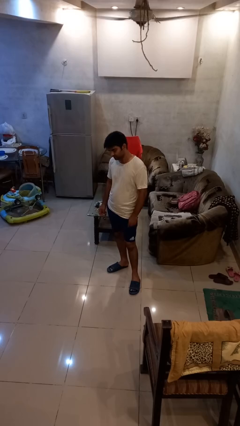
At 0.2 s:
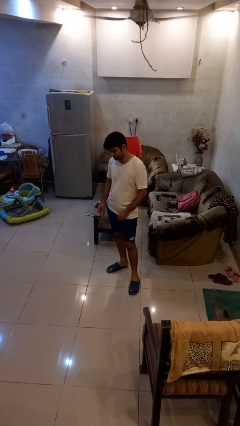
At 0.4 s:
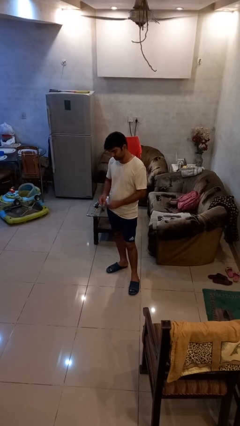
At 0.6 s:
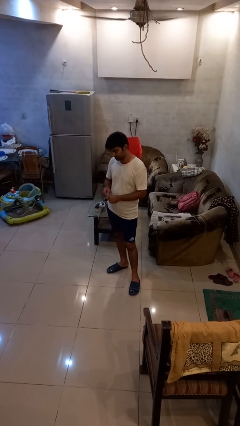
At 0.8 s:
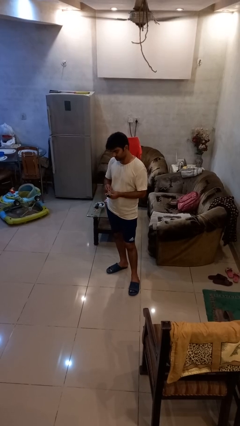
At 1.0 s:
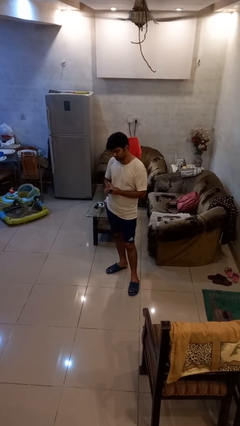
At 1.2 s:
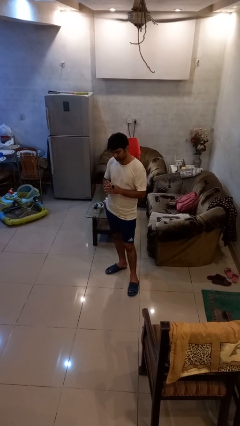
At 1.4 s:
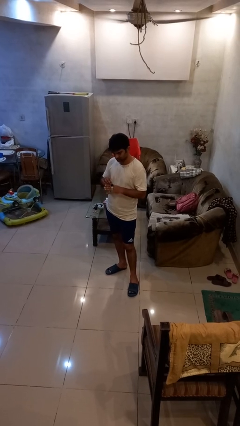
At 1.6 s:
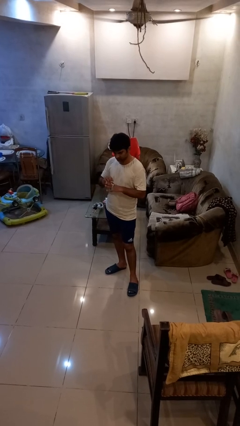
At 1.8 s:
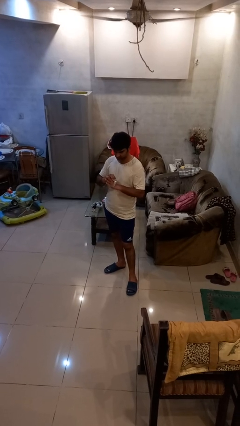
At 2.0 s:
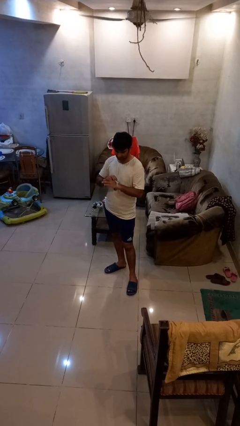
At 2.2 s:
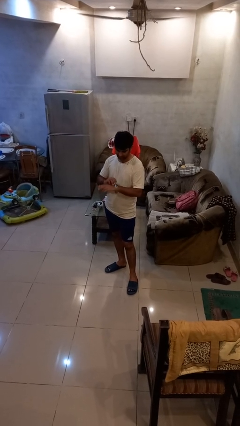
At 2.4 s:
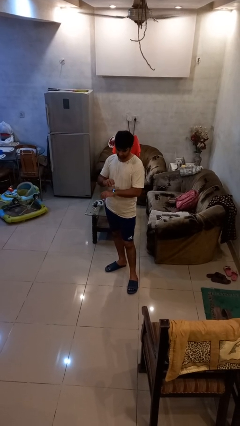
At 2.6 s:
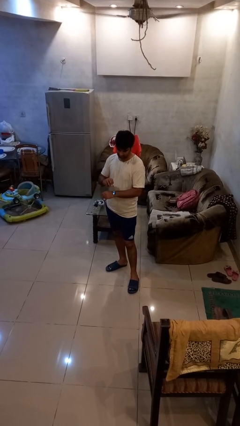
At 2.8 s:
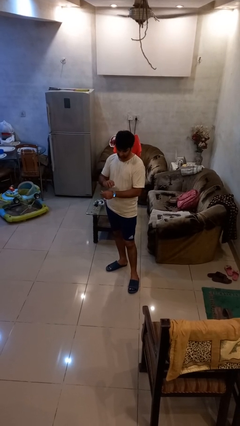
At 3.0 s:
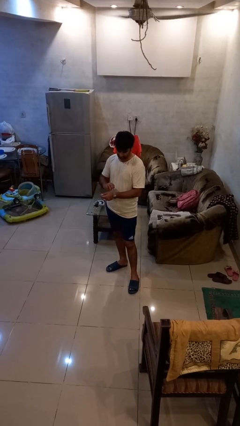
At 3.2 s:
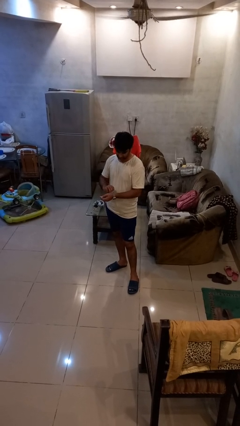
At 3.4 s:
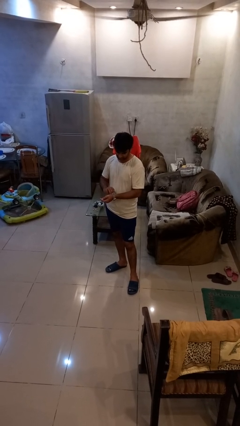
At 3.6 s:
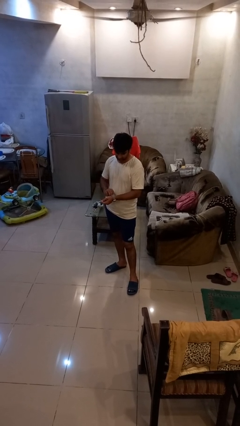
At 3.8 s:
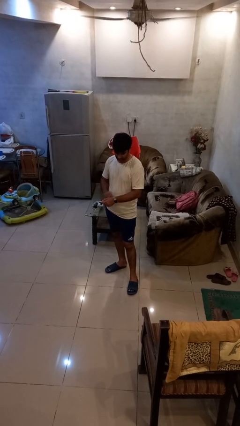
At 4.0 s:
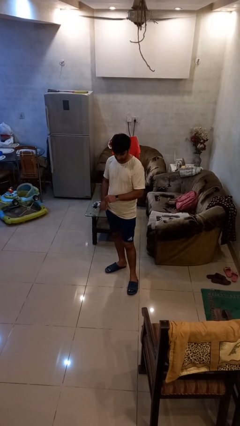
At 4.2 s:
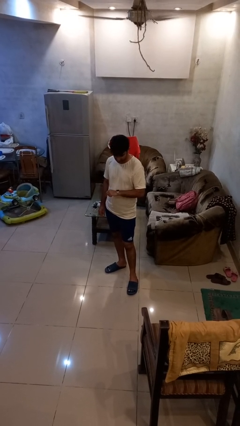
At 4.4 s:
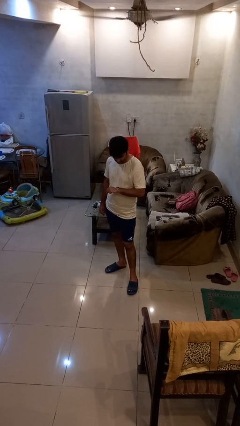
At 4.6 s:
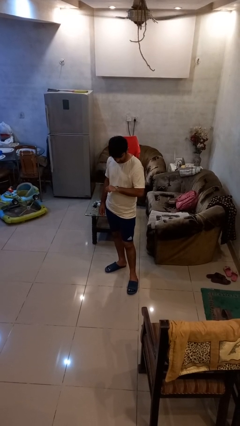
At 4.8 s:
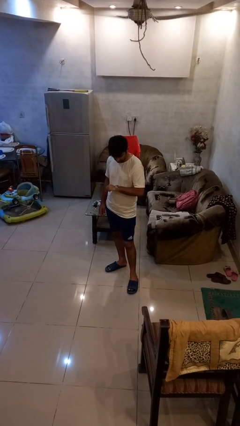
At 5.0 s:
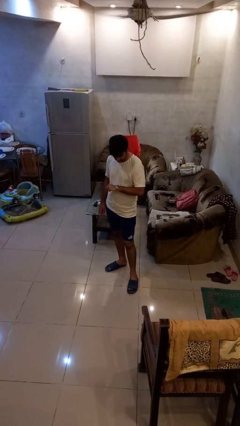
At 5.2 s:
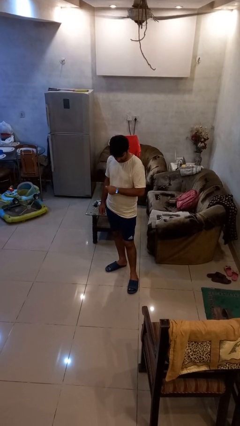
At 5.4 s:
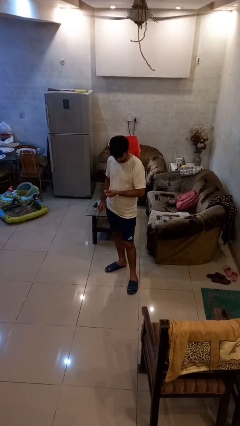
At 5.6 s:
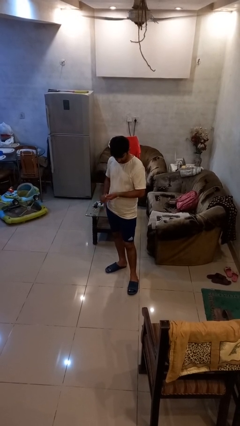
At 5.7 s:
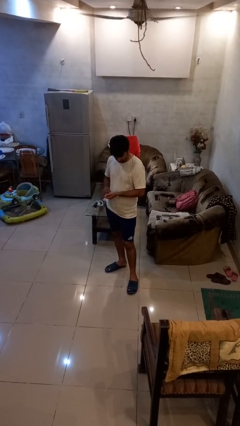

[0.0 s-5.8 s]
person puts on wristwatch

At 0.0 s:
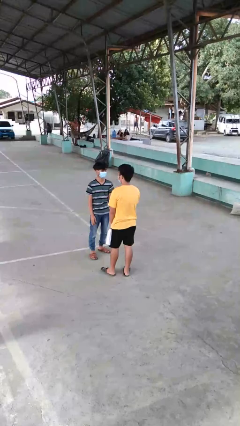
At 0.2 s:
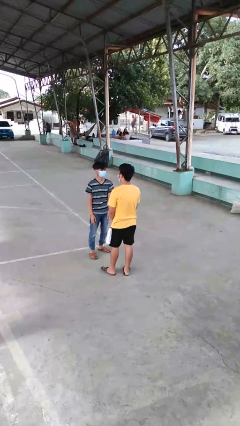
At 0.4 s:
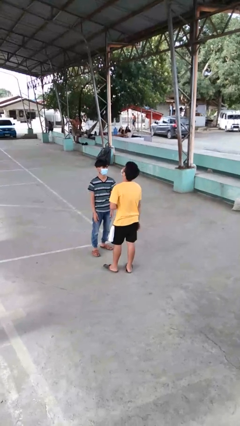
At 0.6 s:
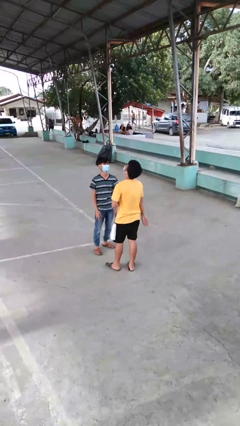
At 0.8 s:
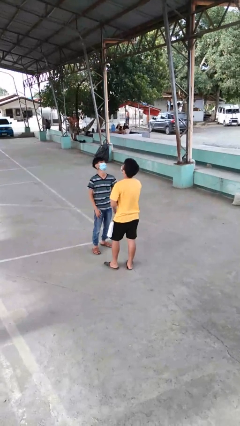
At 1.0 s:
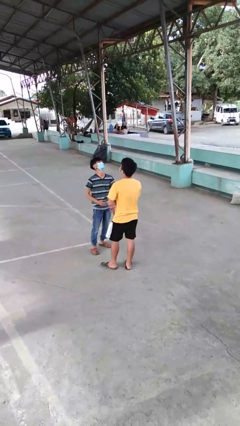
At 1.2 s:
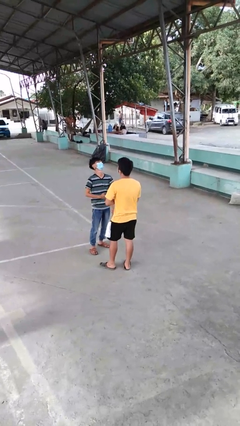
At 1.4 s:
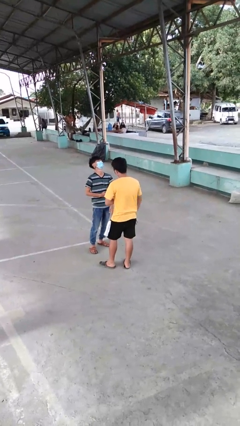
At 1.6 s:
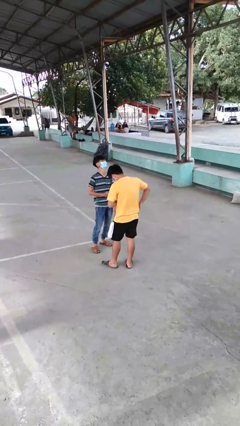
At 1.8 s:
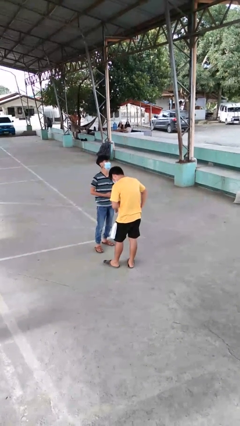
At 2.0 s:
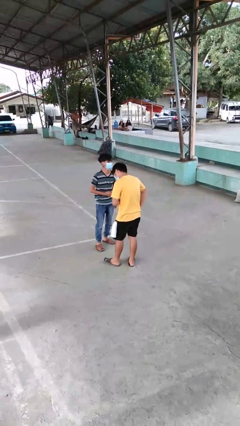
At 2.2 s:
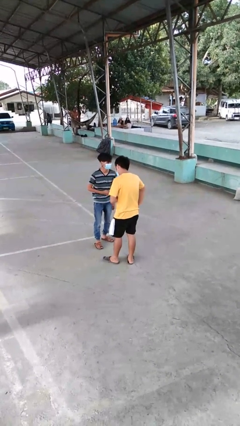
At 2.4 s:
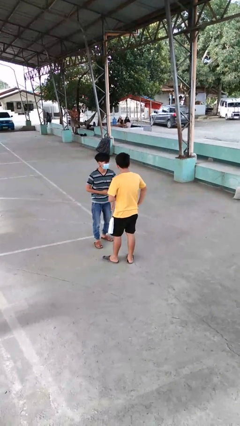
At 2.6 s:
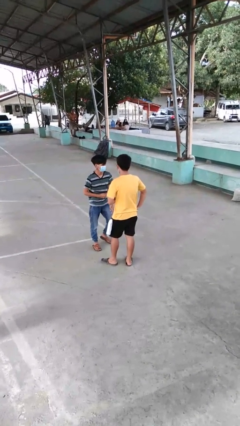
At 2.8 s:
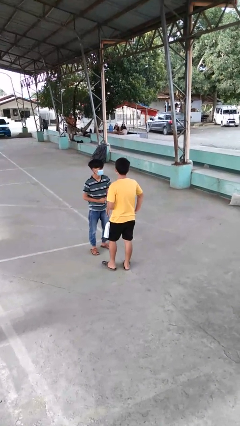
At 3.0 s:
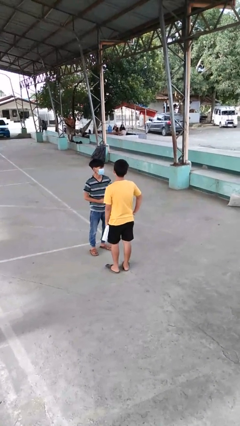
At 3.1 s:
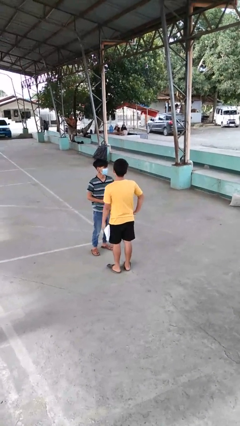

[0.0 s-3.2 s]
person laughs with person

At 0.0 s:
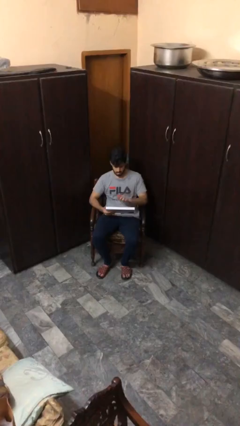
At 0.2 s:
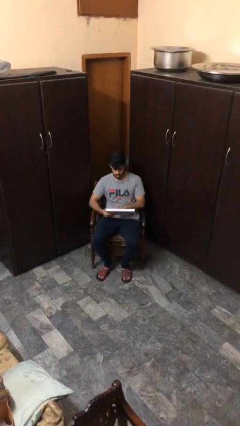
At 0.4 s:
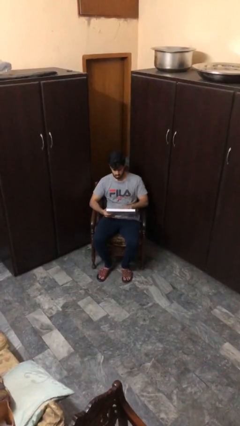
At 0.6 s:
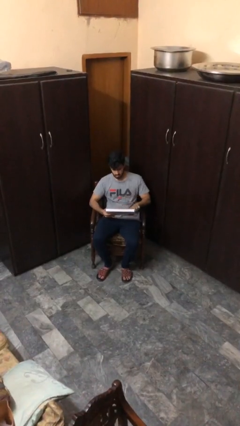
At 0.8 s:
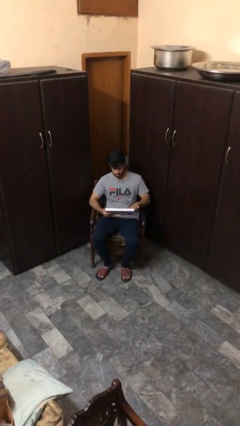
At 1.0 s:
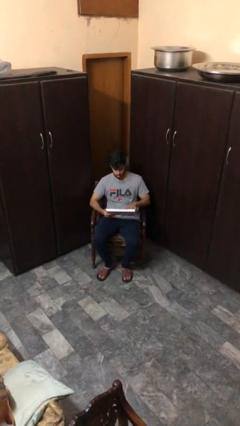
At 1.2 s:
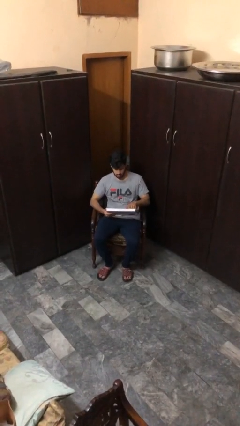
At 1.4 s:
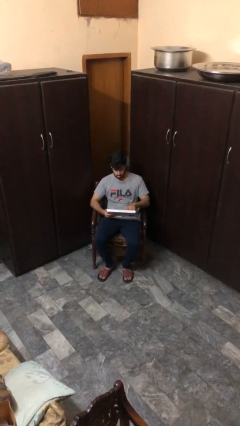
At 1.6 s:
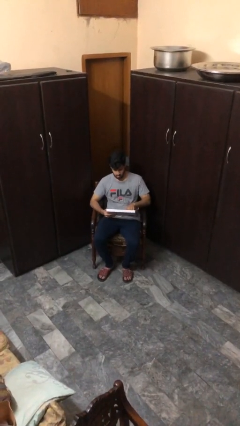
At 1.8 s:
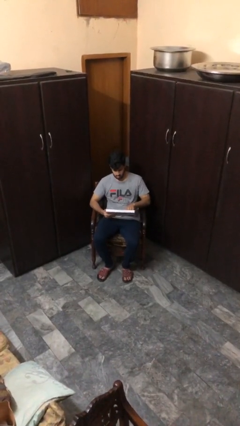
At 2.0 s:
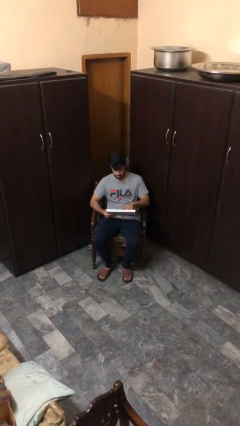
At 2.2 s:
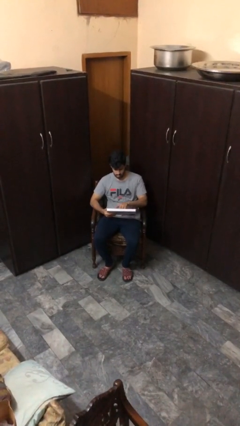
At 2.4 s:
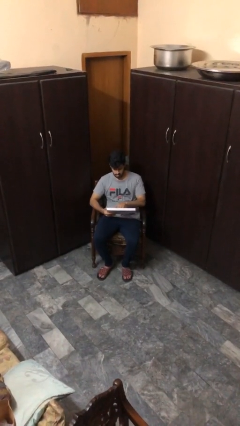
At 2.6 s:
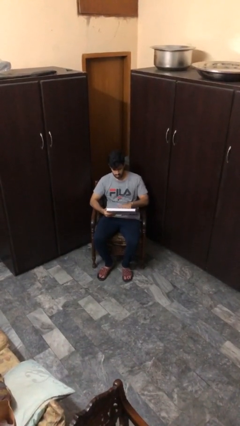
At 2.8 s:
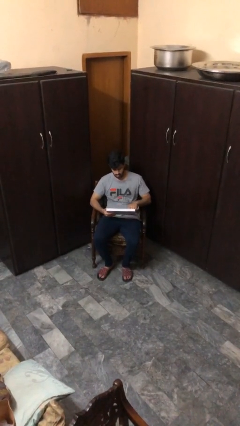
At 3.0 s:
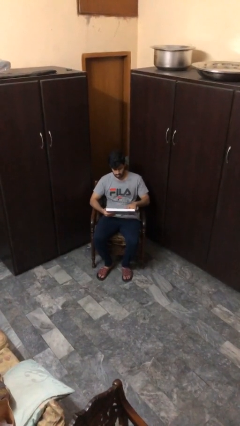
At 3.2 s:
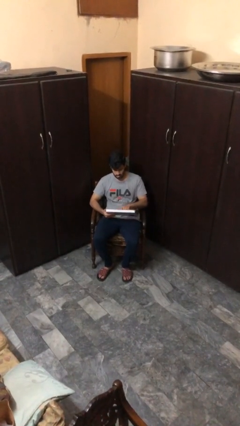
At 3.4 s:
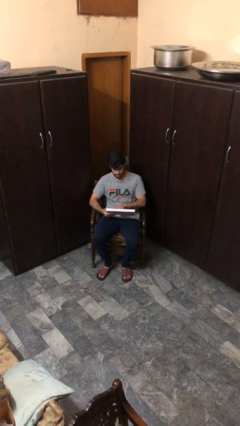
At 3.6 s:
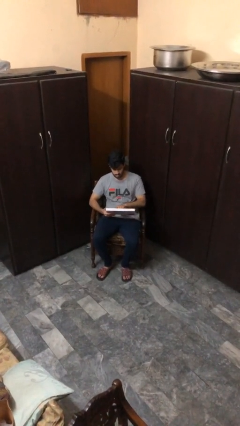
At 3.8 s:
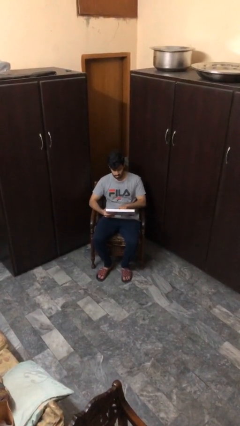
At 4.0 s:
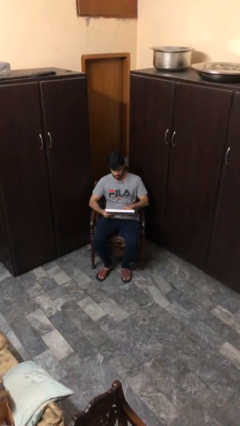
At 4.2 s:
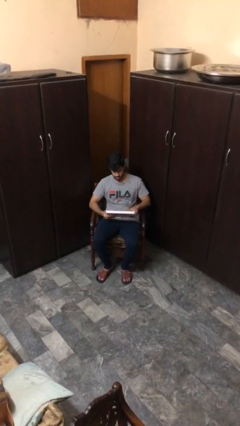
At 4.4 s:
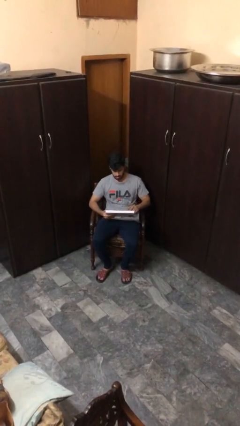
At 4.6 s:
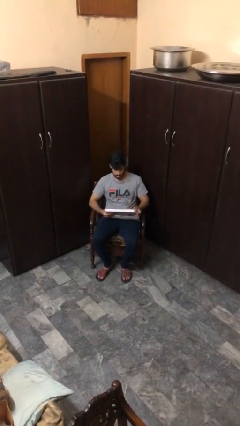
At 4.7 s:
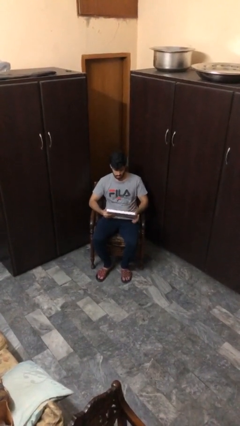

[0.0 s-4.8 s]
person interacts with tablet

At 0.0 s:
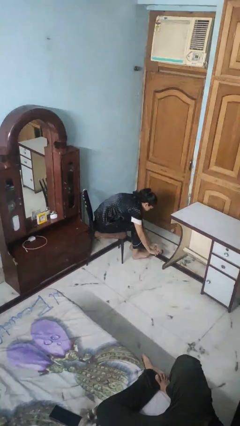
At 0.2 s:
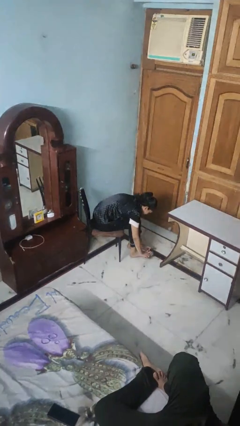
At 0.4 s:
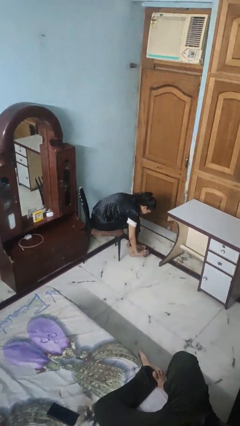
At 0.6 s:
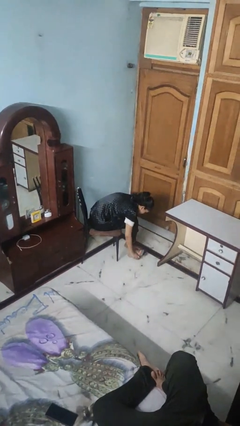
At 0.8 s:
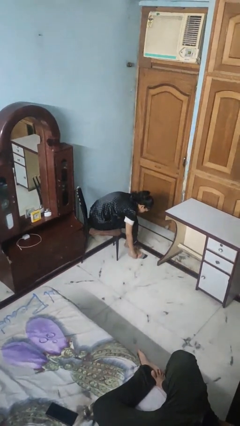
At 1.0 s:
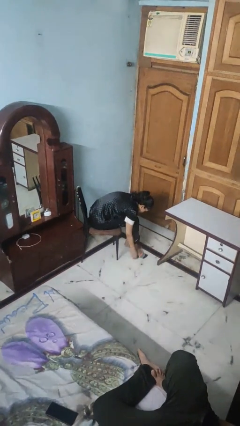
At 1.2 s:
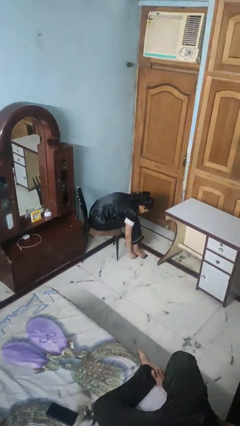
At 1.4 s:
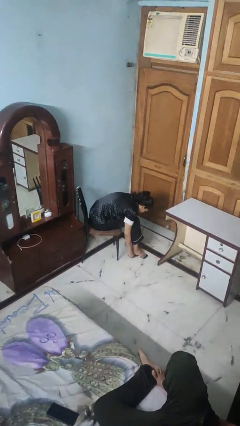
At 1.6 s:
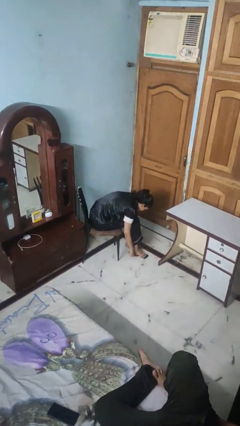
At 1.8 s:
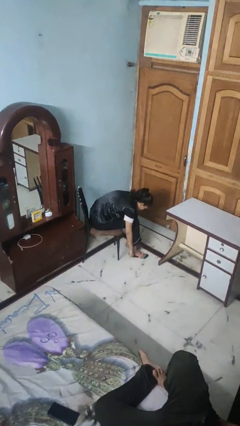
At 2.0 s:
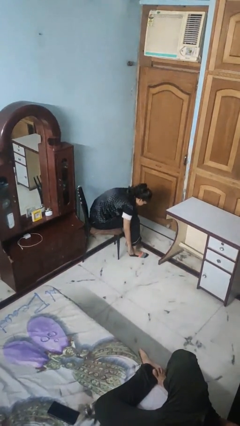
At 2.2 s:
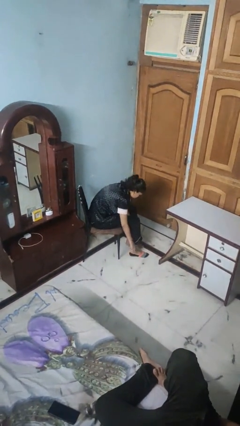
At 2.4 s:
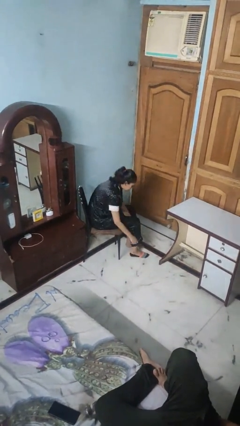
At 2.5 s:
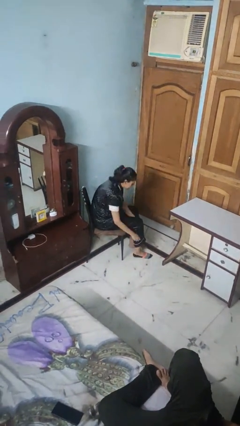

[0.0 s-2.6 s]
person puts on socks

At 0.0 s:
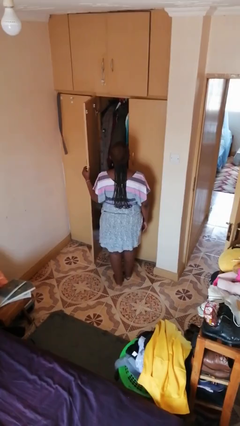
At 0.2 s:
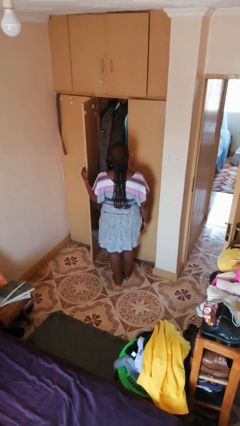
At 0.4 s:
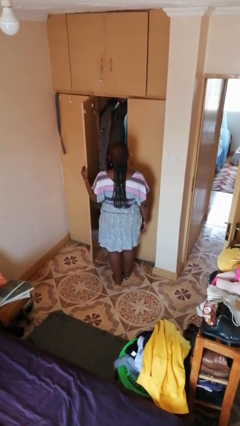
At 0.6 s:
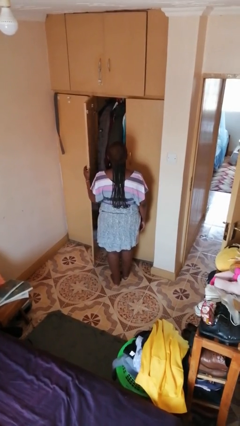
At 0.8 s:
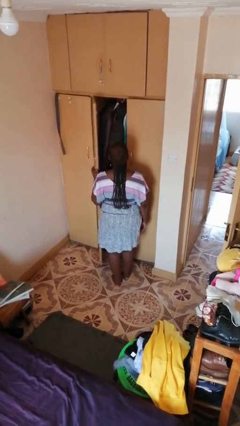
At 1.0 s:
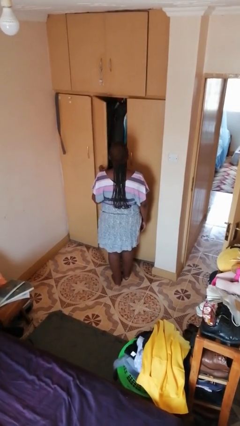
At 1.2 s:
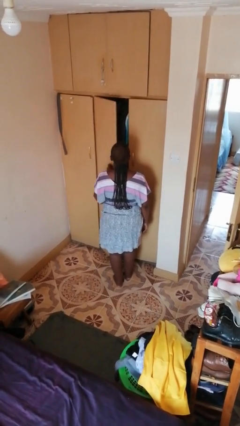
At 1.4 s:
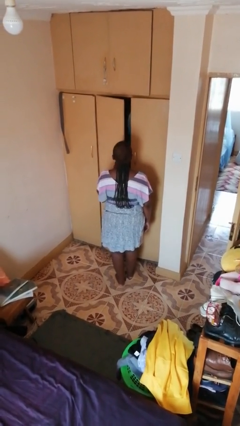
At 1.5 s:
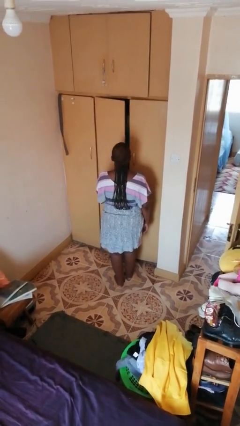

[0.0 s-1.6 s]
person closes closet door

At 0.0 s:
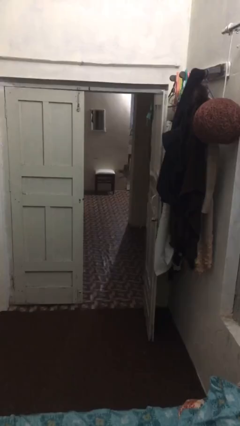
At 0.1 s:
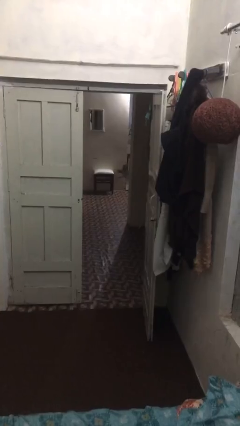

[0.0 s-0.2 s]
person enters scene through structure
